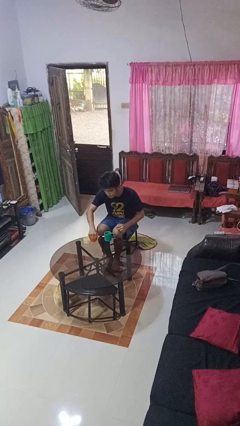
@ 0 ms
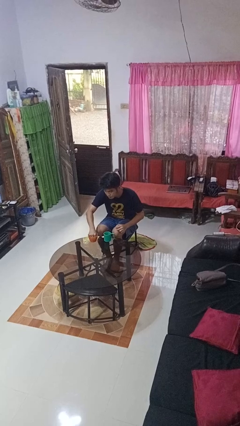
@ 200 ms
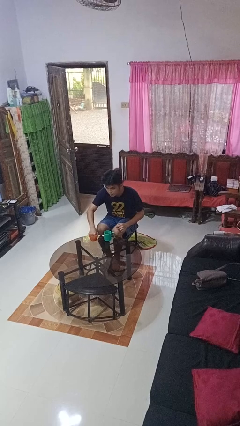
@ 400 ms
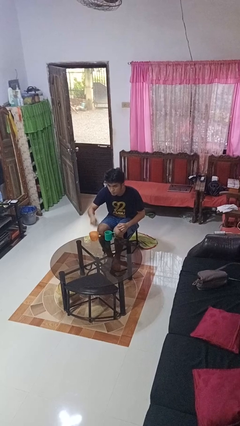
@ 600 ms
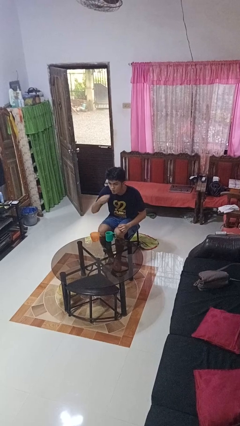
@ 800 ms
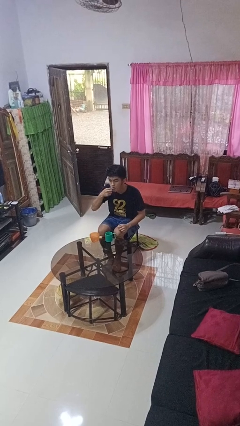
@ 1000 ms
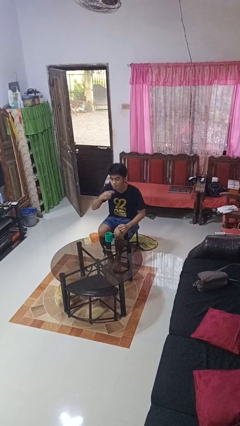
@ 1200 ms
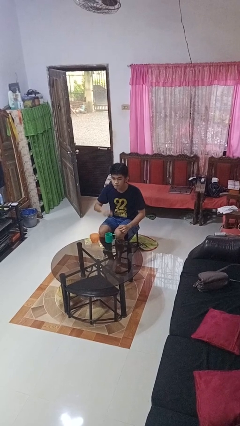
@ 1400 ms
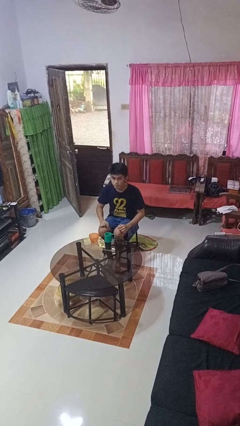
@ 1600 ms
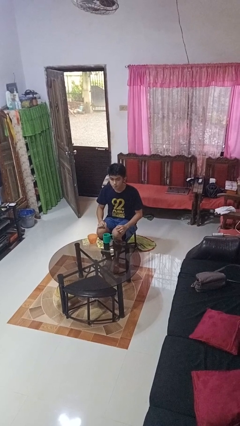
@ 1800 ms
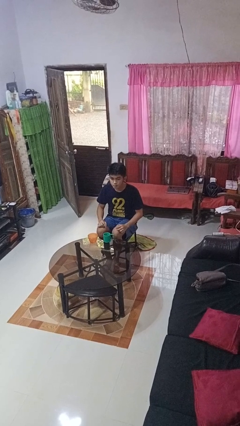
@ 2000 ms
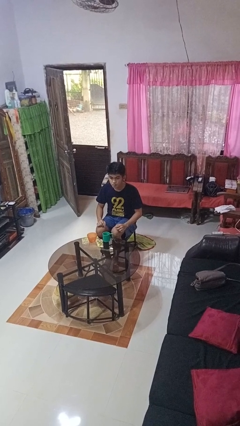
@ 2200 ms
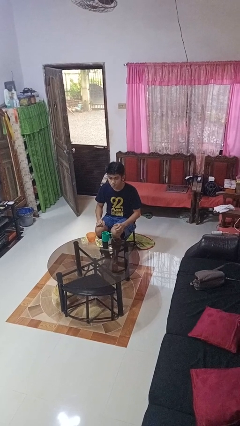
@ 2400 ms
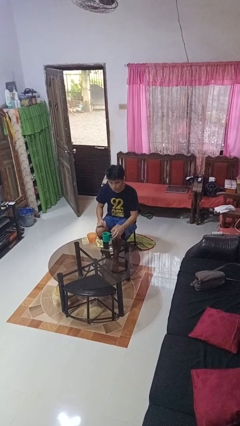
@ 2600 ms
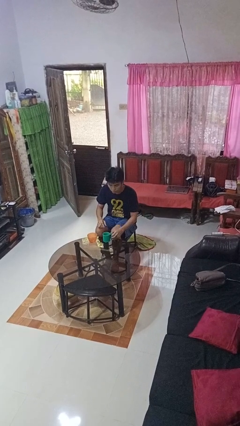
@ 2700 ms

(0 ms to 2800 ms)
person takes medicine pills

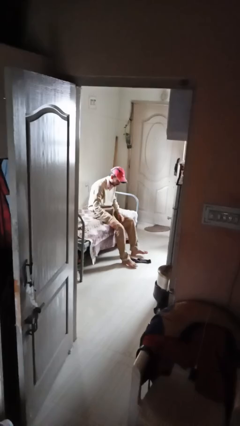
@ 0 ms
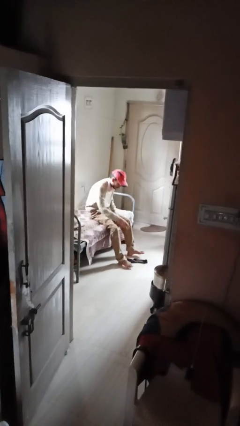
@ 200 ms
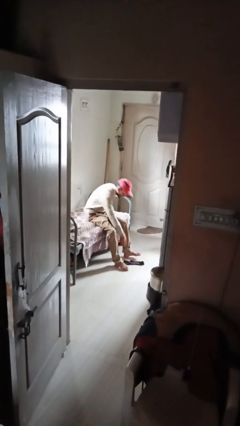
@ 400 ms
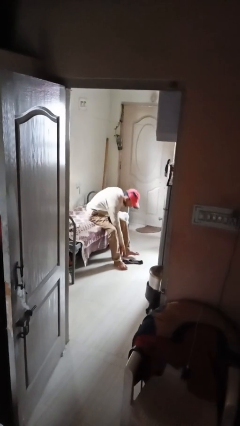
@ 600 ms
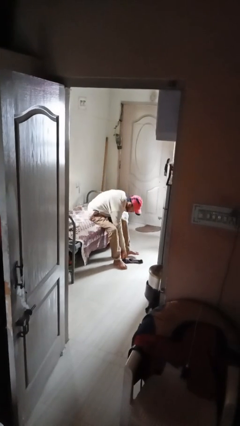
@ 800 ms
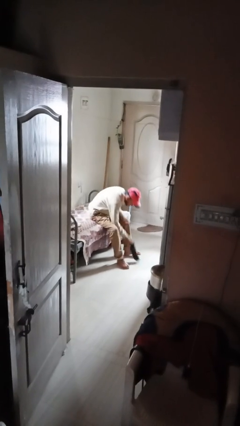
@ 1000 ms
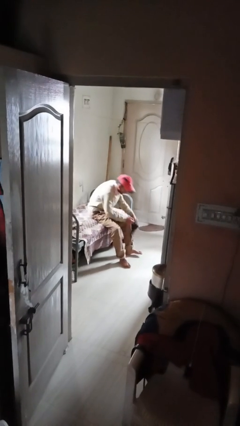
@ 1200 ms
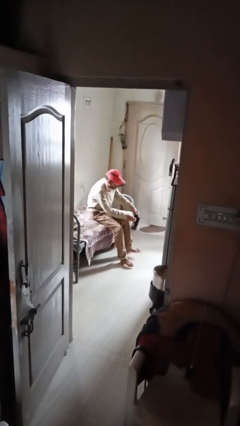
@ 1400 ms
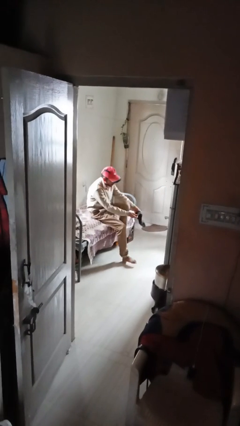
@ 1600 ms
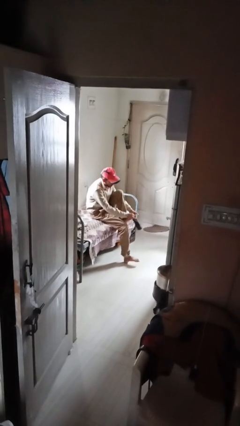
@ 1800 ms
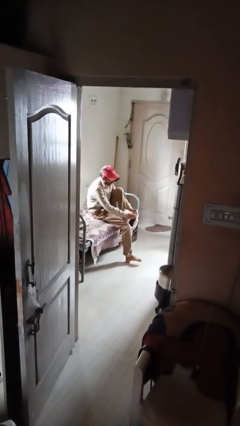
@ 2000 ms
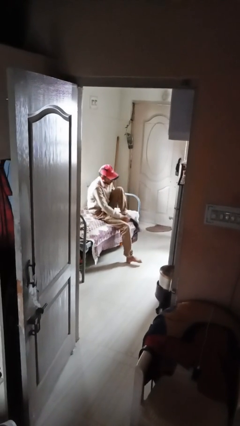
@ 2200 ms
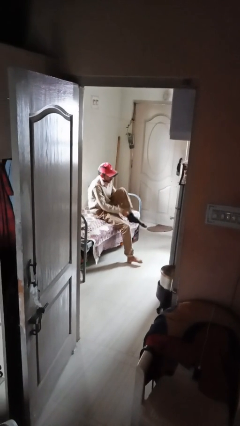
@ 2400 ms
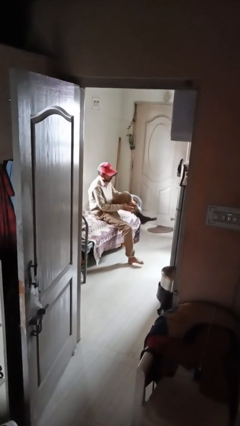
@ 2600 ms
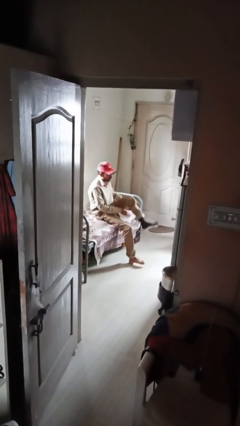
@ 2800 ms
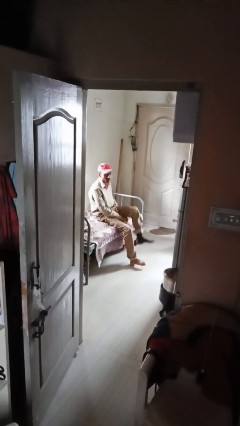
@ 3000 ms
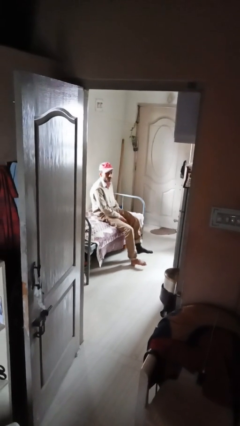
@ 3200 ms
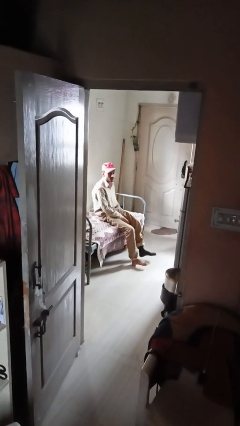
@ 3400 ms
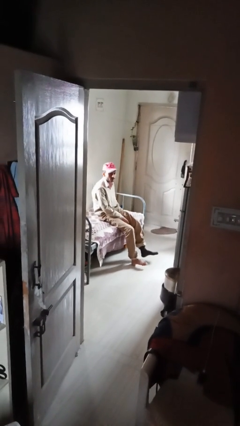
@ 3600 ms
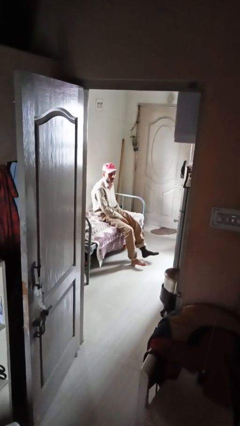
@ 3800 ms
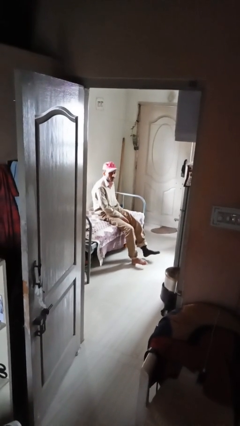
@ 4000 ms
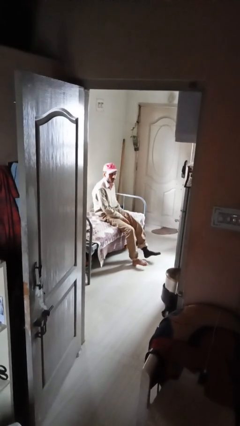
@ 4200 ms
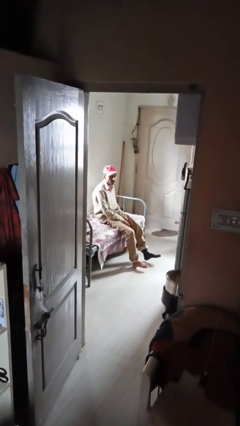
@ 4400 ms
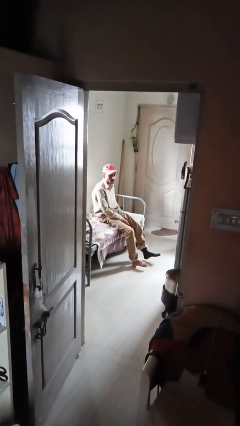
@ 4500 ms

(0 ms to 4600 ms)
person puts on socks

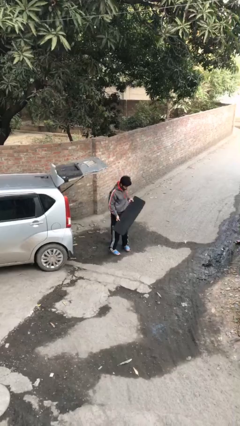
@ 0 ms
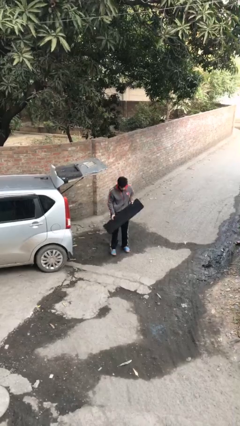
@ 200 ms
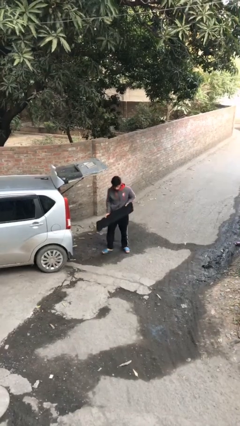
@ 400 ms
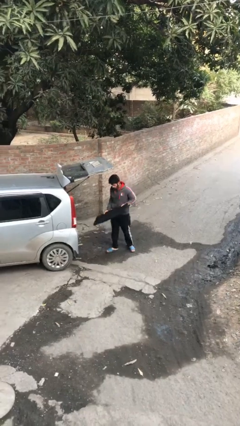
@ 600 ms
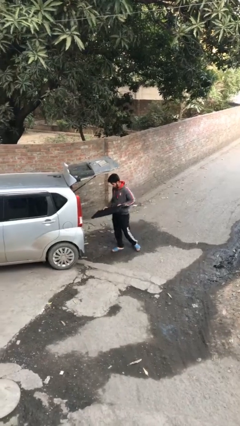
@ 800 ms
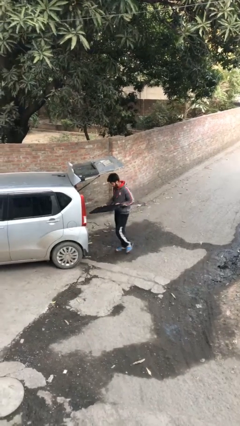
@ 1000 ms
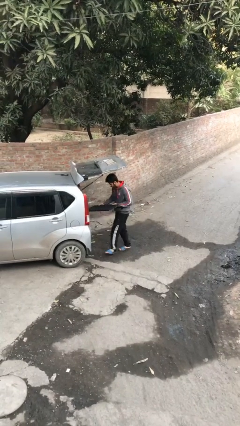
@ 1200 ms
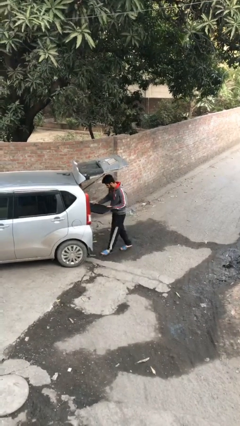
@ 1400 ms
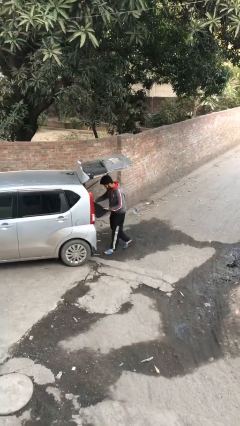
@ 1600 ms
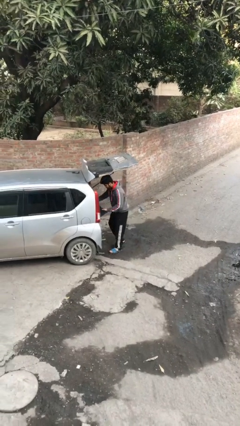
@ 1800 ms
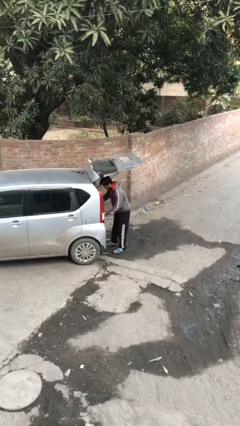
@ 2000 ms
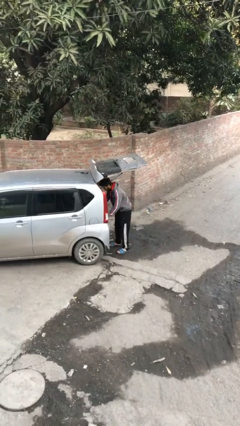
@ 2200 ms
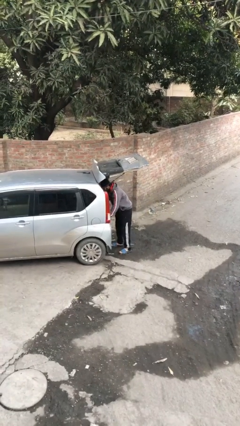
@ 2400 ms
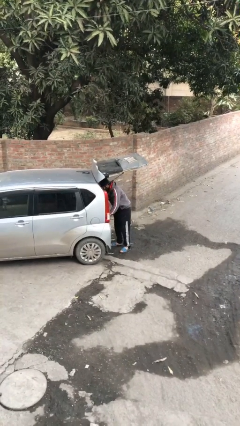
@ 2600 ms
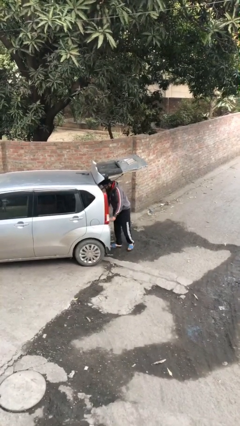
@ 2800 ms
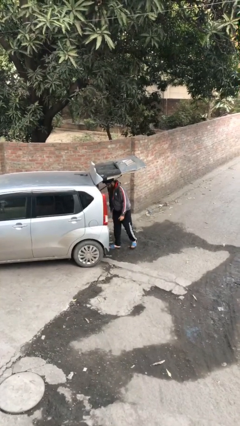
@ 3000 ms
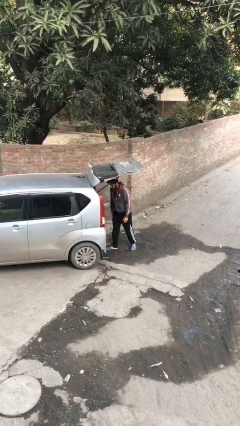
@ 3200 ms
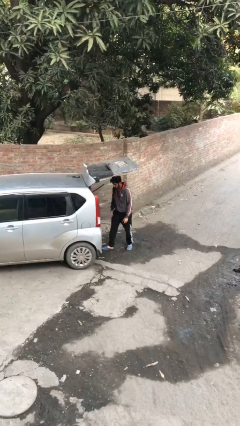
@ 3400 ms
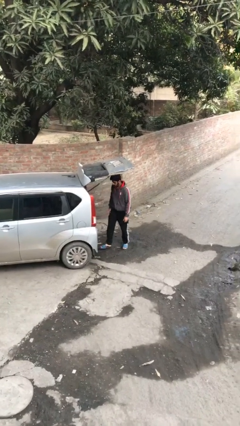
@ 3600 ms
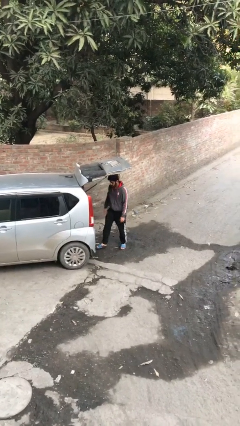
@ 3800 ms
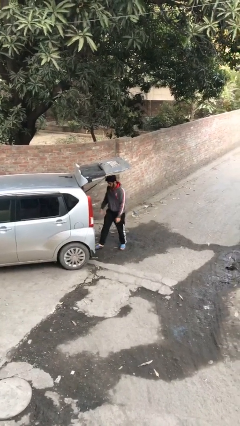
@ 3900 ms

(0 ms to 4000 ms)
person loads car

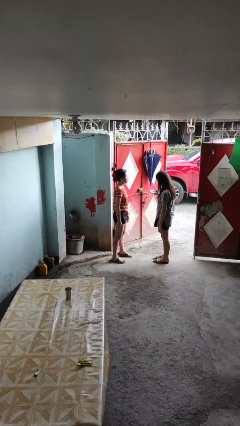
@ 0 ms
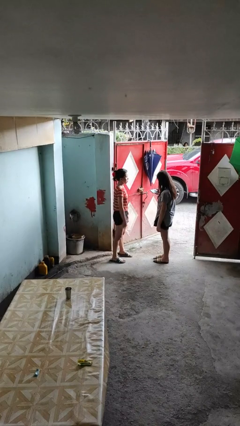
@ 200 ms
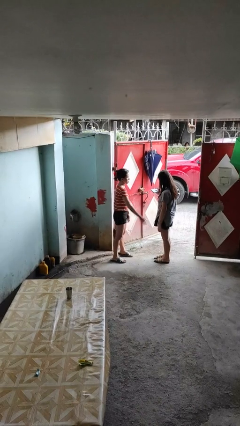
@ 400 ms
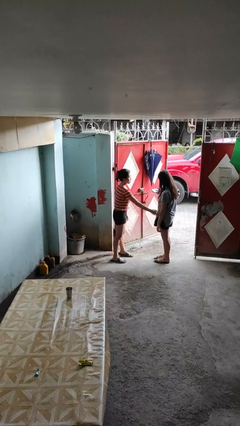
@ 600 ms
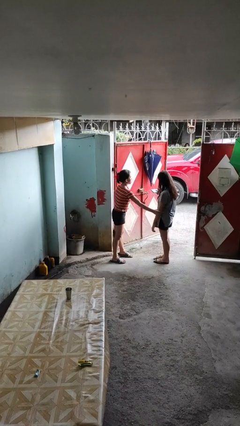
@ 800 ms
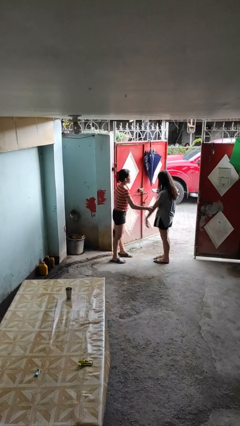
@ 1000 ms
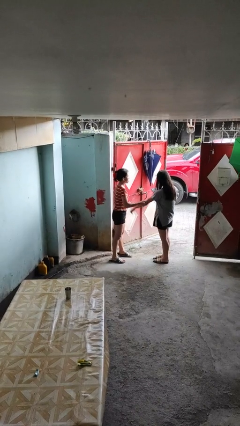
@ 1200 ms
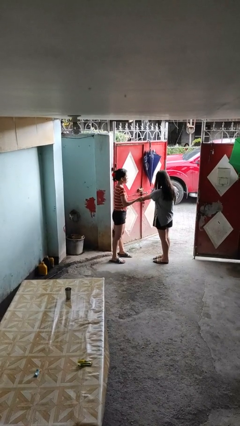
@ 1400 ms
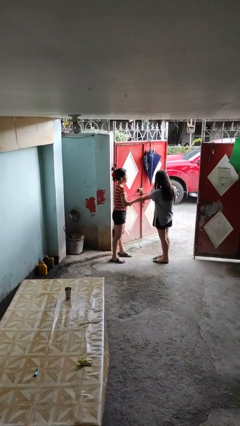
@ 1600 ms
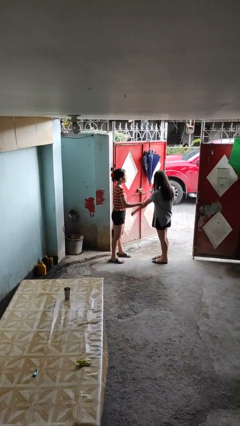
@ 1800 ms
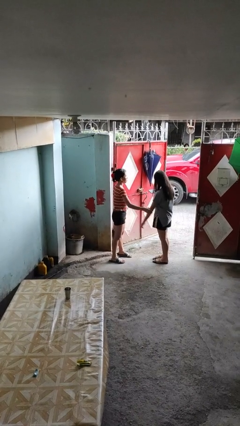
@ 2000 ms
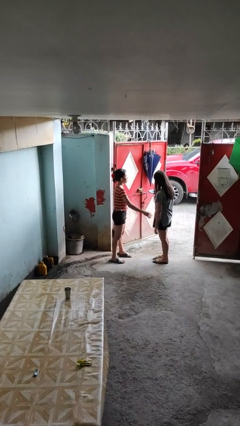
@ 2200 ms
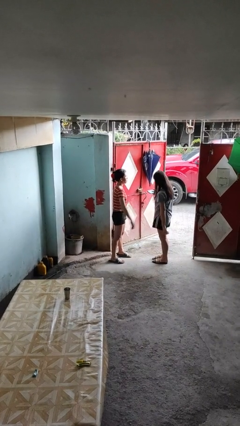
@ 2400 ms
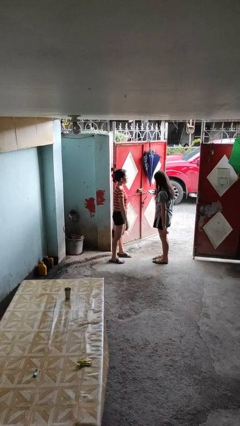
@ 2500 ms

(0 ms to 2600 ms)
person grabs person by forearm

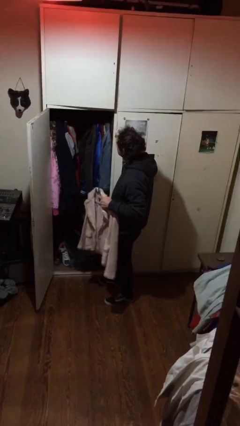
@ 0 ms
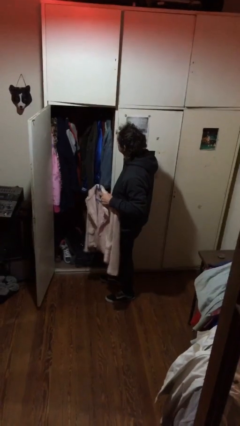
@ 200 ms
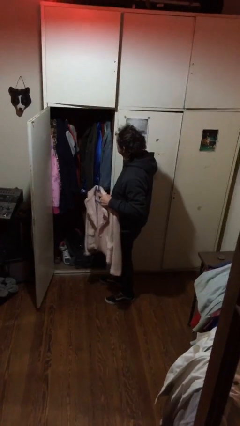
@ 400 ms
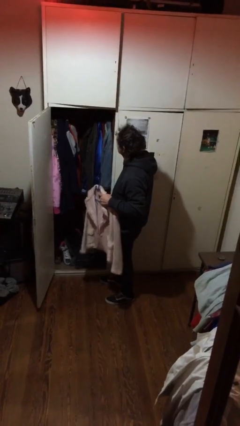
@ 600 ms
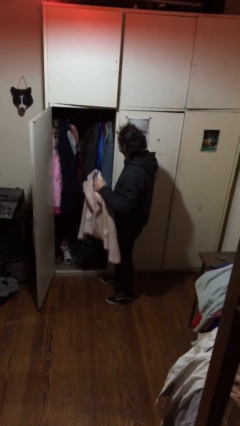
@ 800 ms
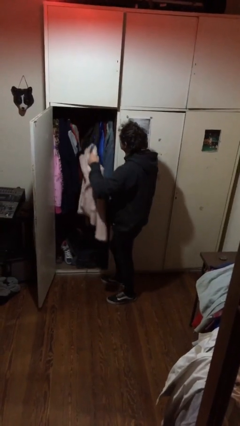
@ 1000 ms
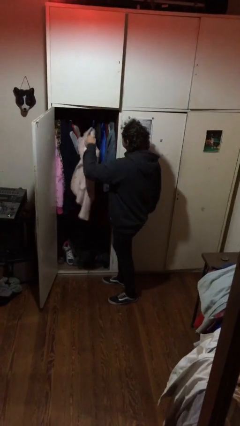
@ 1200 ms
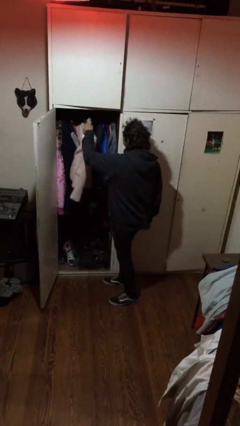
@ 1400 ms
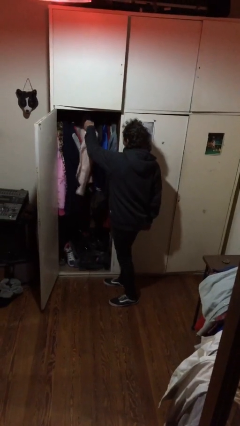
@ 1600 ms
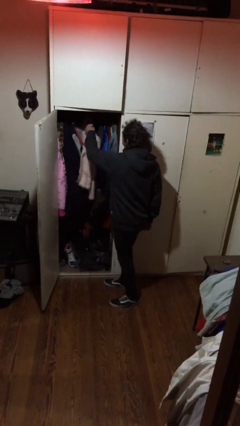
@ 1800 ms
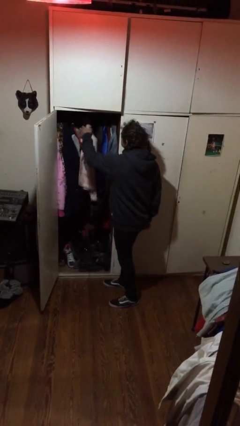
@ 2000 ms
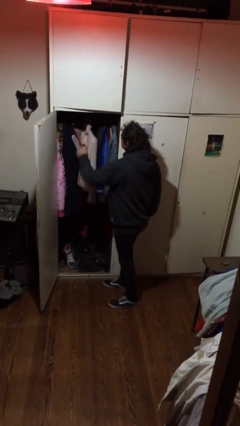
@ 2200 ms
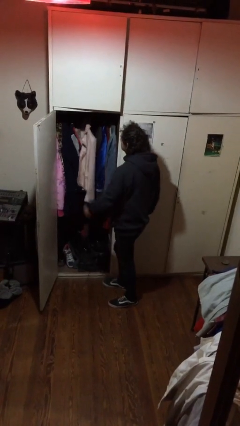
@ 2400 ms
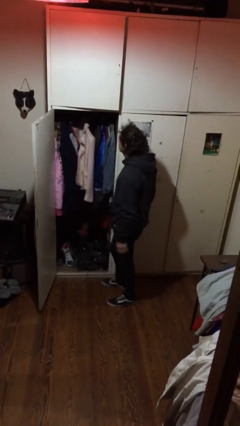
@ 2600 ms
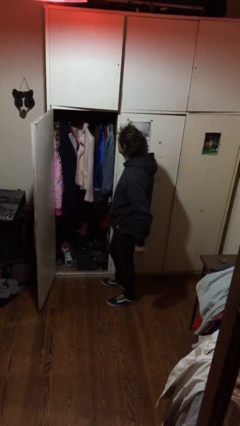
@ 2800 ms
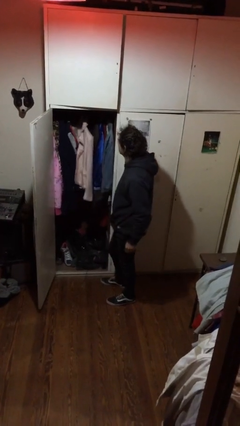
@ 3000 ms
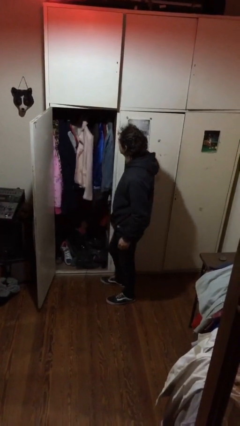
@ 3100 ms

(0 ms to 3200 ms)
person puts clothes into closet

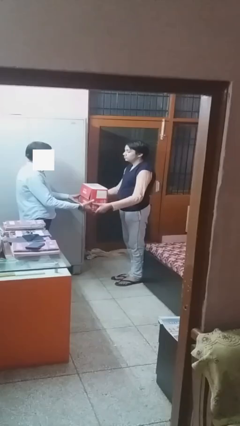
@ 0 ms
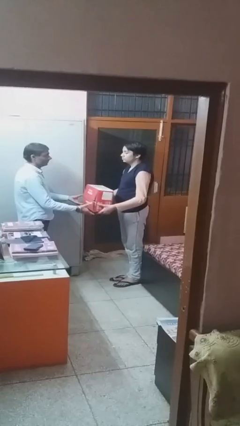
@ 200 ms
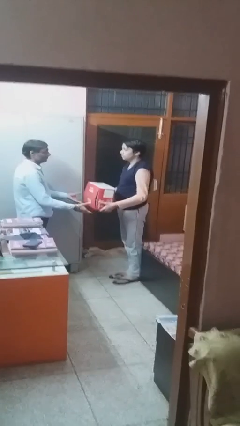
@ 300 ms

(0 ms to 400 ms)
person transfers object to person
